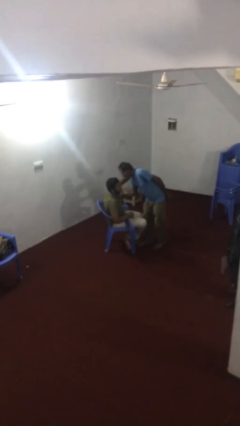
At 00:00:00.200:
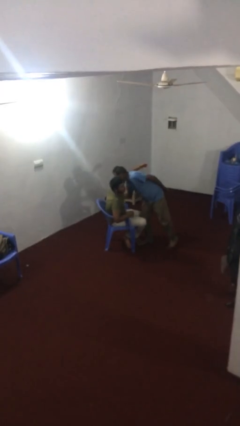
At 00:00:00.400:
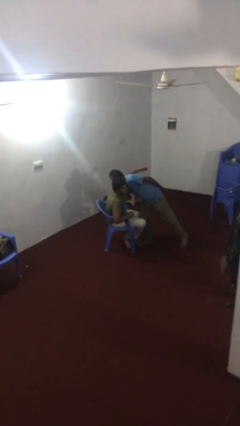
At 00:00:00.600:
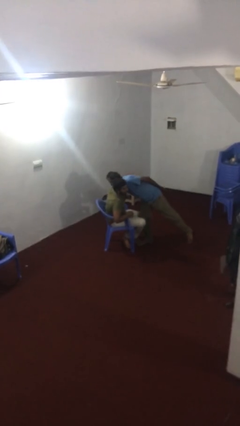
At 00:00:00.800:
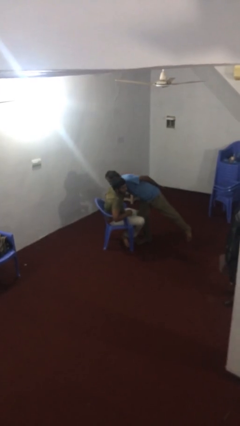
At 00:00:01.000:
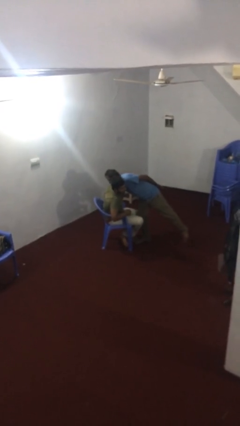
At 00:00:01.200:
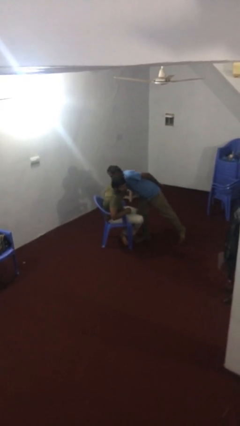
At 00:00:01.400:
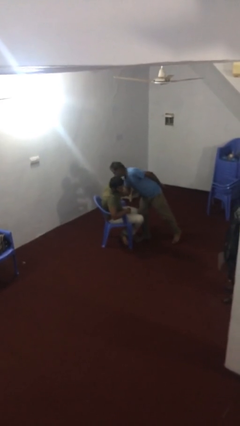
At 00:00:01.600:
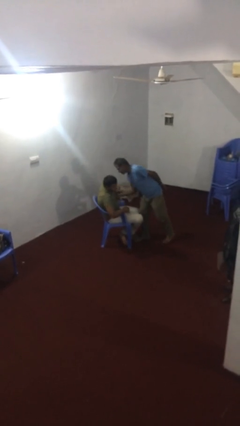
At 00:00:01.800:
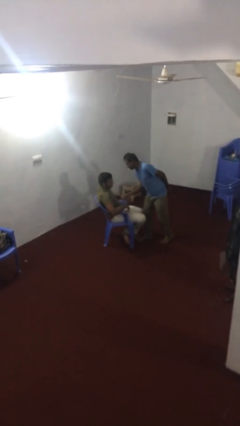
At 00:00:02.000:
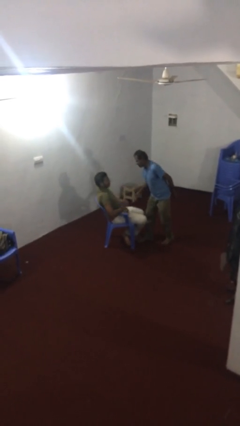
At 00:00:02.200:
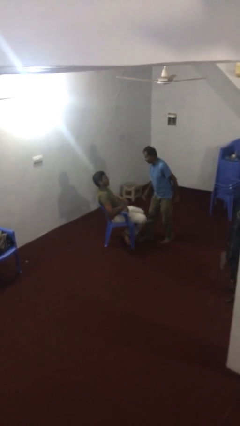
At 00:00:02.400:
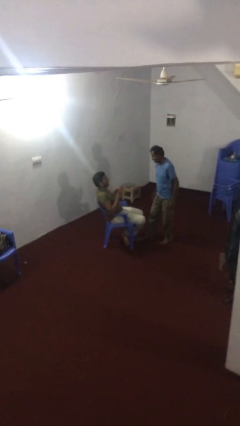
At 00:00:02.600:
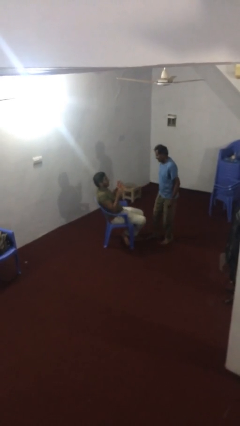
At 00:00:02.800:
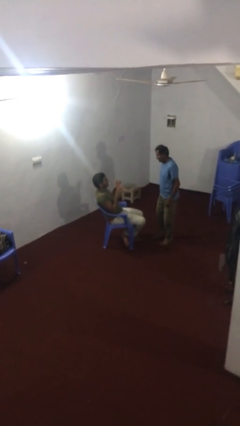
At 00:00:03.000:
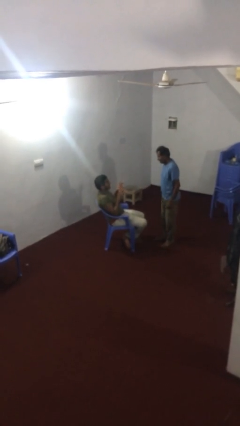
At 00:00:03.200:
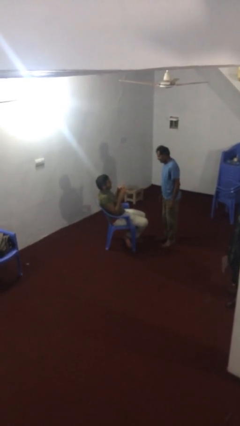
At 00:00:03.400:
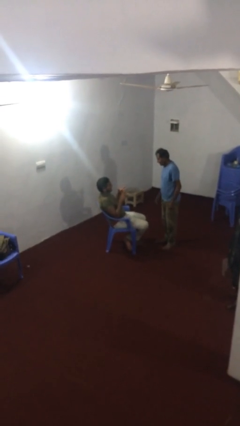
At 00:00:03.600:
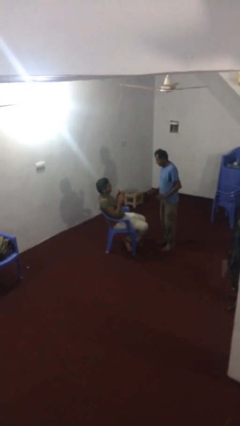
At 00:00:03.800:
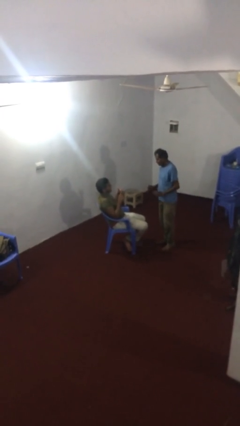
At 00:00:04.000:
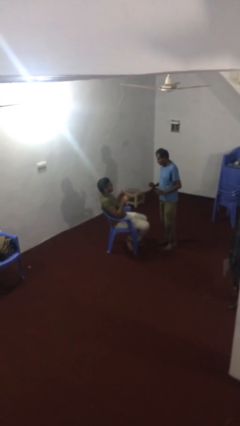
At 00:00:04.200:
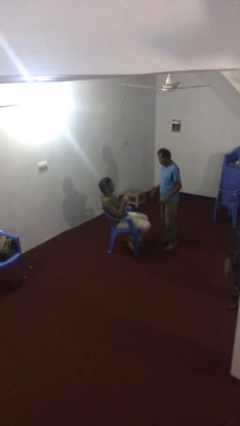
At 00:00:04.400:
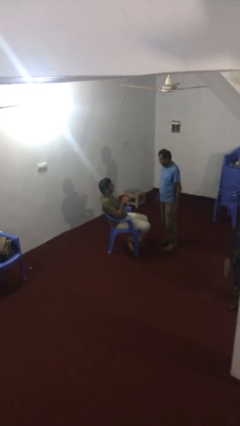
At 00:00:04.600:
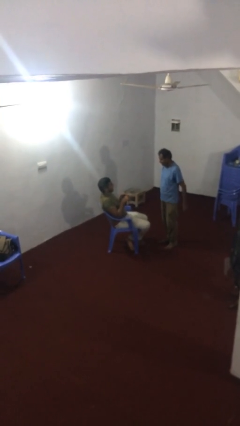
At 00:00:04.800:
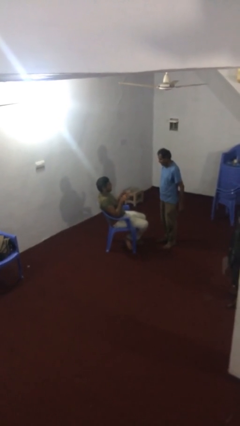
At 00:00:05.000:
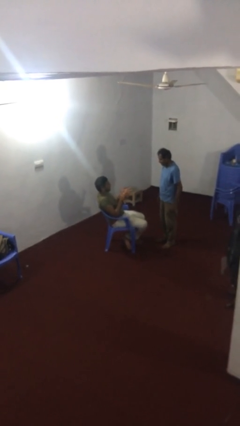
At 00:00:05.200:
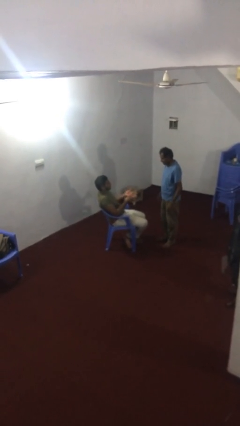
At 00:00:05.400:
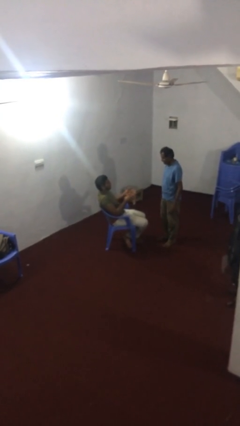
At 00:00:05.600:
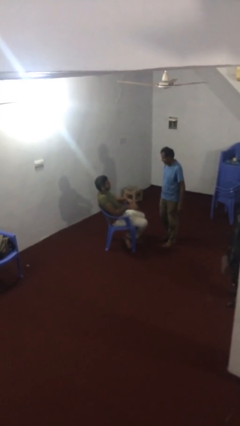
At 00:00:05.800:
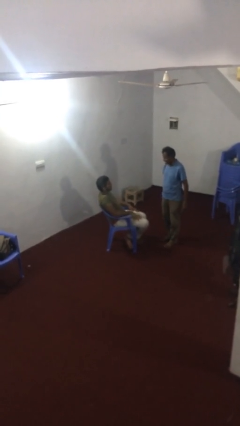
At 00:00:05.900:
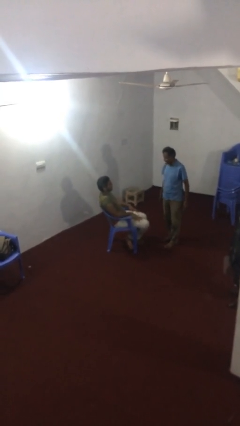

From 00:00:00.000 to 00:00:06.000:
person embraces person

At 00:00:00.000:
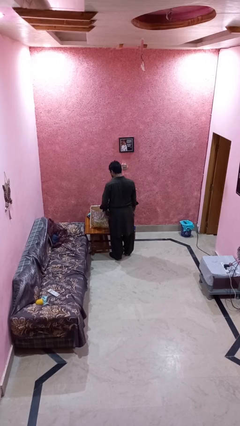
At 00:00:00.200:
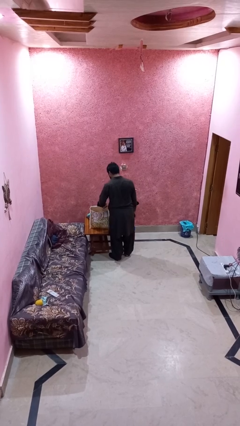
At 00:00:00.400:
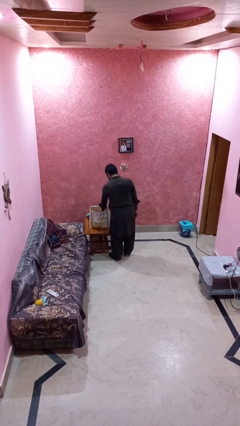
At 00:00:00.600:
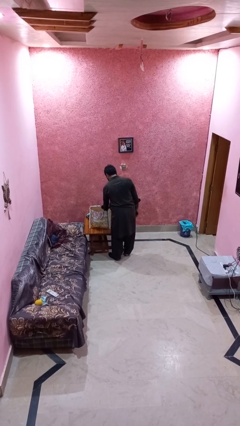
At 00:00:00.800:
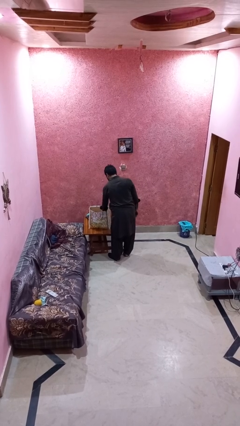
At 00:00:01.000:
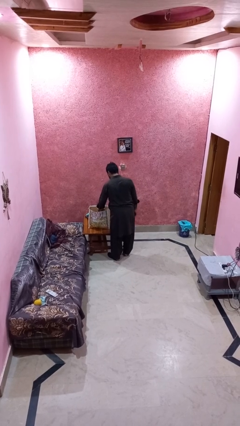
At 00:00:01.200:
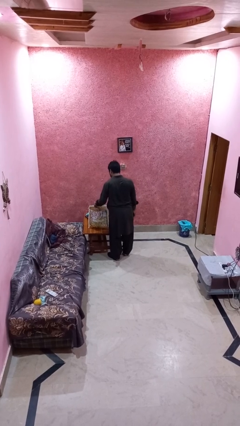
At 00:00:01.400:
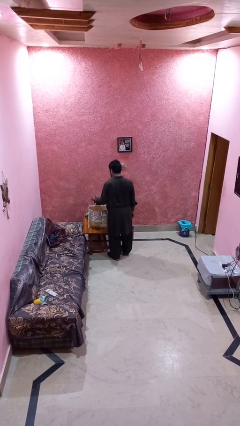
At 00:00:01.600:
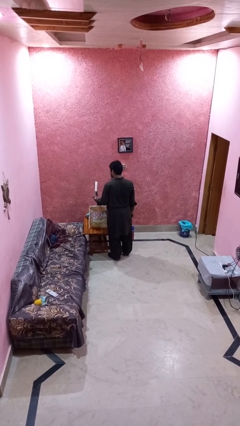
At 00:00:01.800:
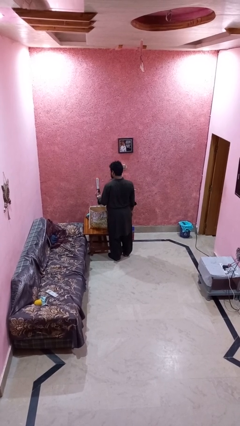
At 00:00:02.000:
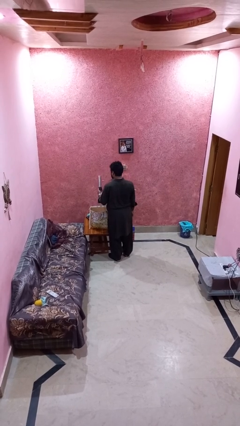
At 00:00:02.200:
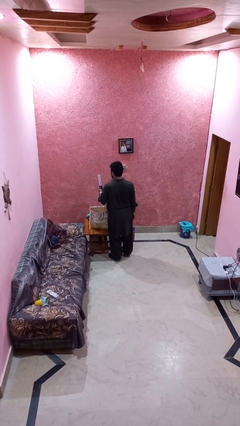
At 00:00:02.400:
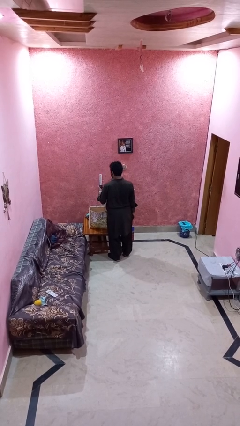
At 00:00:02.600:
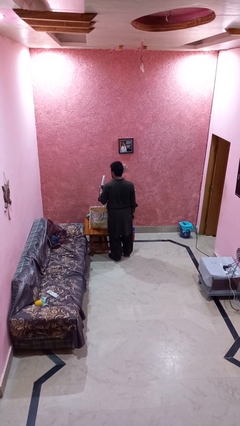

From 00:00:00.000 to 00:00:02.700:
person takes object from bag

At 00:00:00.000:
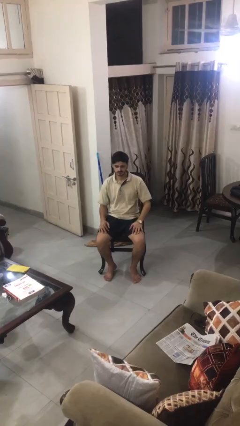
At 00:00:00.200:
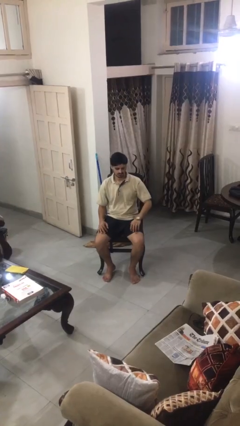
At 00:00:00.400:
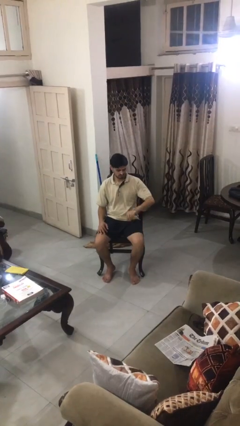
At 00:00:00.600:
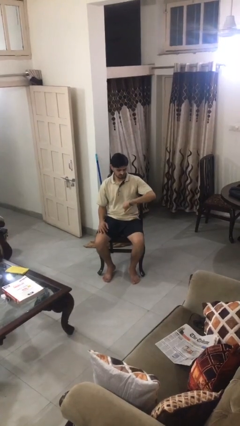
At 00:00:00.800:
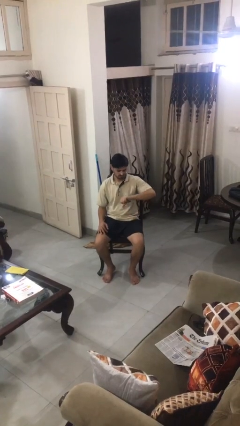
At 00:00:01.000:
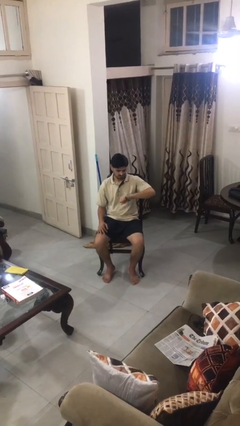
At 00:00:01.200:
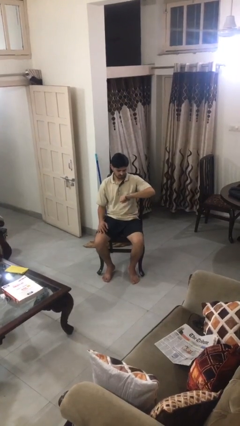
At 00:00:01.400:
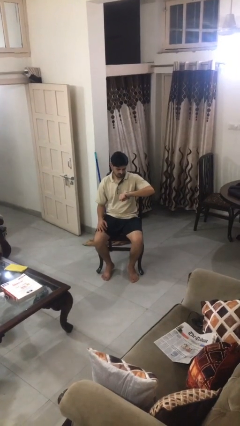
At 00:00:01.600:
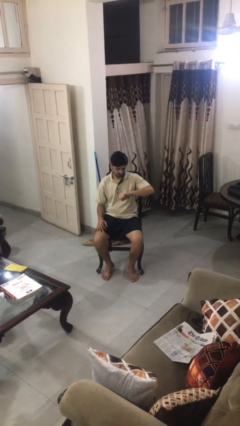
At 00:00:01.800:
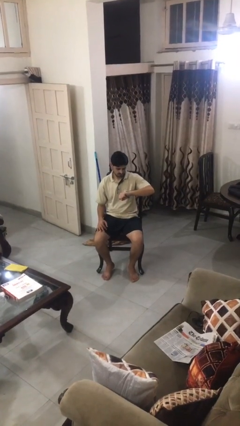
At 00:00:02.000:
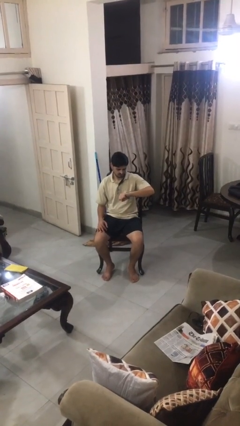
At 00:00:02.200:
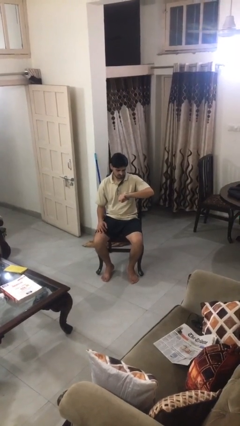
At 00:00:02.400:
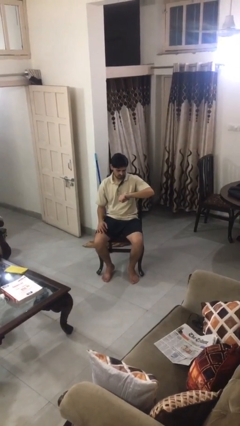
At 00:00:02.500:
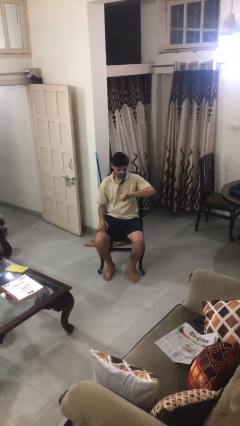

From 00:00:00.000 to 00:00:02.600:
person looks at wristwatch

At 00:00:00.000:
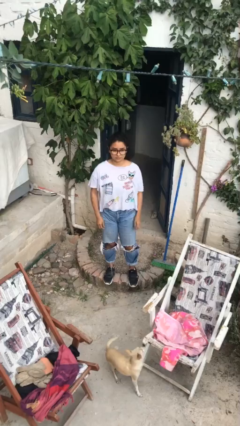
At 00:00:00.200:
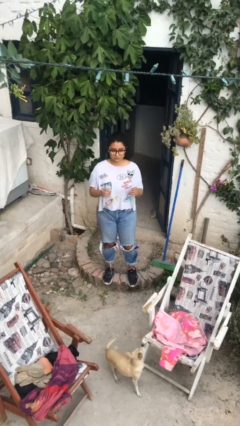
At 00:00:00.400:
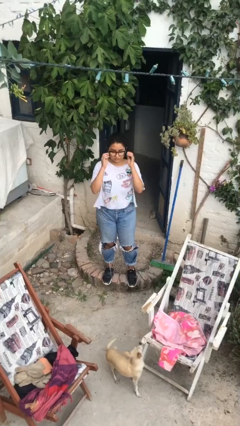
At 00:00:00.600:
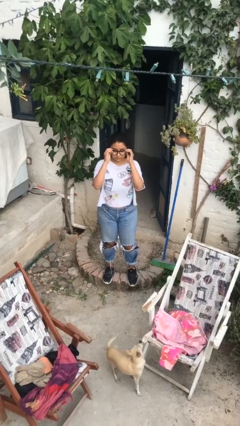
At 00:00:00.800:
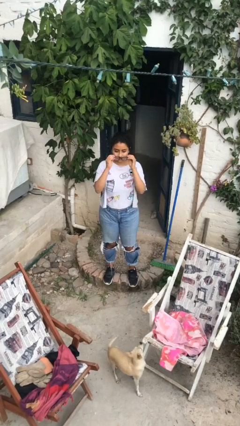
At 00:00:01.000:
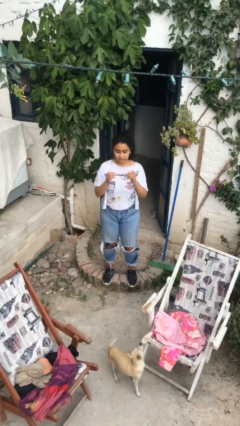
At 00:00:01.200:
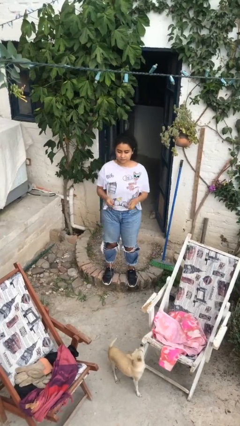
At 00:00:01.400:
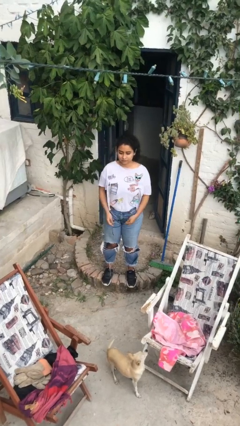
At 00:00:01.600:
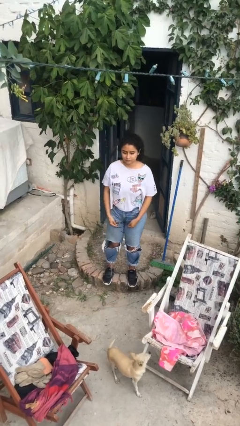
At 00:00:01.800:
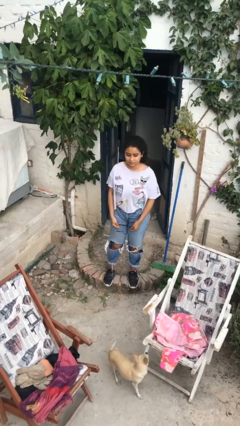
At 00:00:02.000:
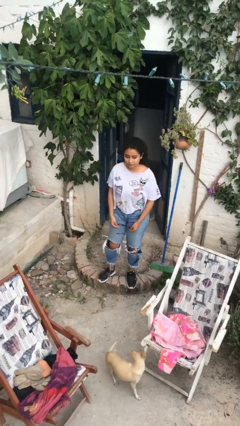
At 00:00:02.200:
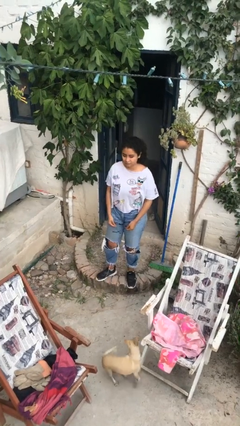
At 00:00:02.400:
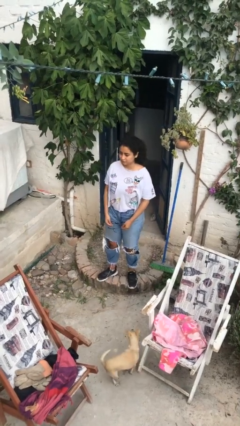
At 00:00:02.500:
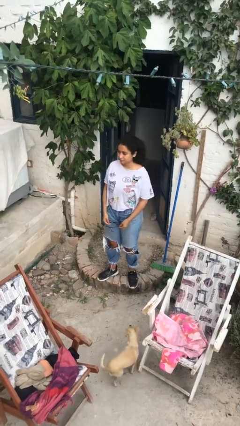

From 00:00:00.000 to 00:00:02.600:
person takes off glasses

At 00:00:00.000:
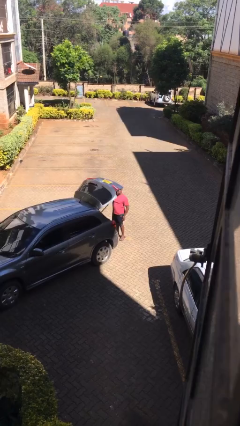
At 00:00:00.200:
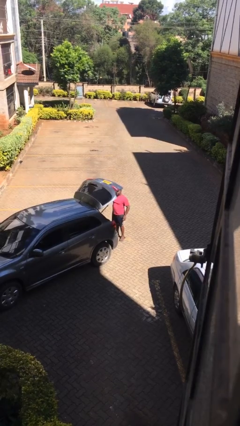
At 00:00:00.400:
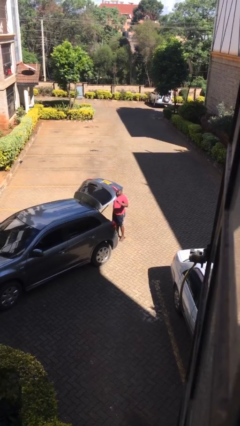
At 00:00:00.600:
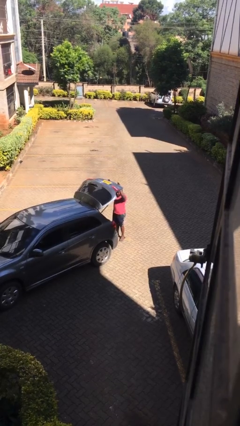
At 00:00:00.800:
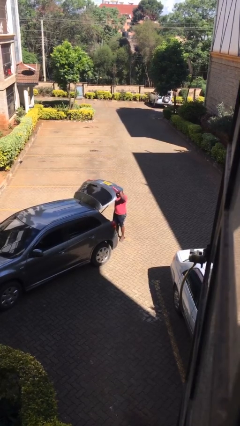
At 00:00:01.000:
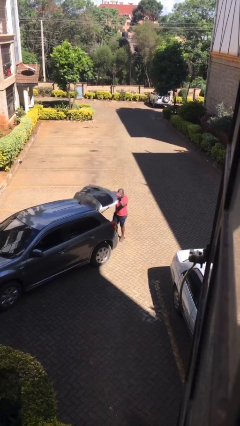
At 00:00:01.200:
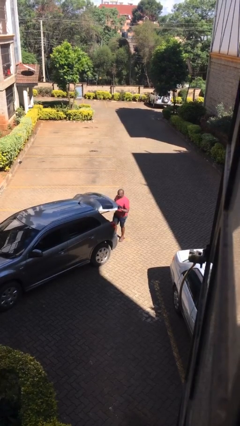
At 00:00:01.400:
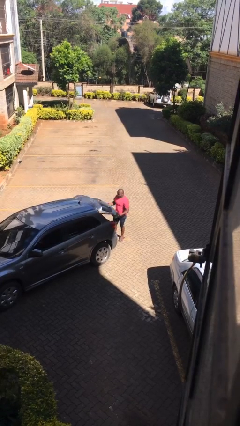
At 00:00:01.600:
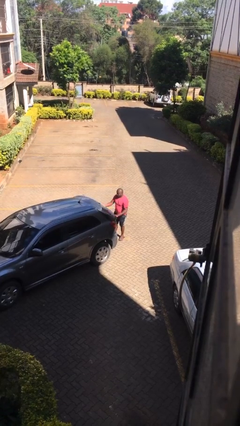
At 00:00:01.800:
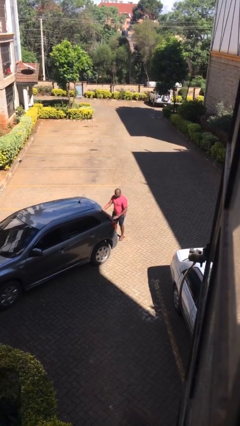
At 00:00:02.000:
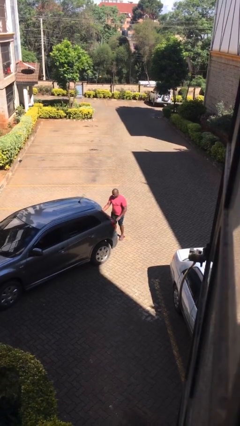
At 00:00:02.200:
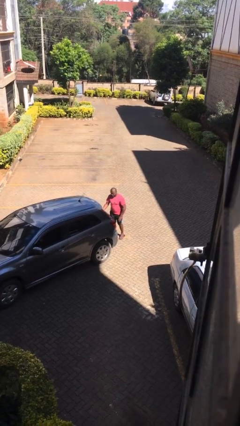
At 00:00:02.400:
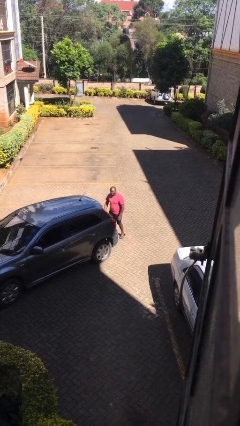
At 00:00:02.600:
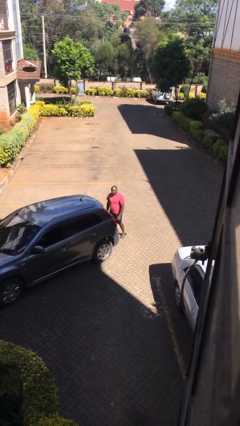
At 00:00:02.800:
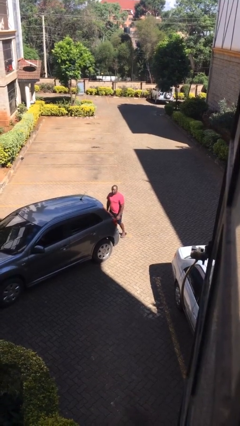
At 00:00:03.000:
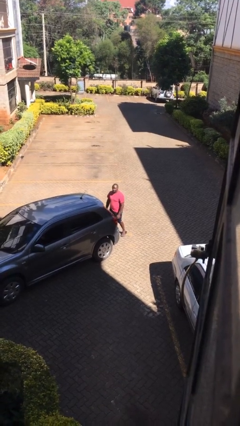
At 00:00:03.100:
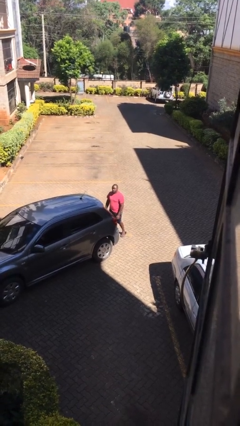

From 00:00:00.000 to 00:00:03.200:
person closes car trunk
